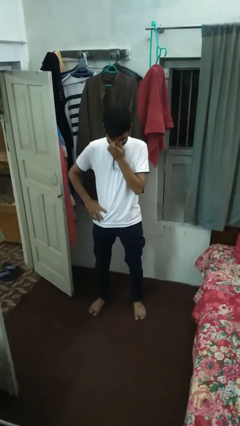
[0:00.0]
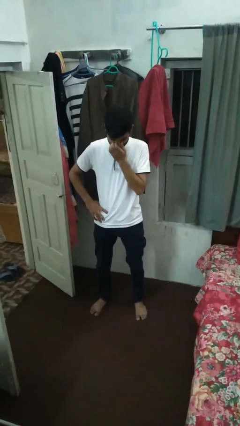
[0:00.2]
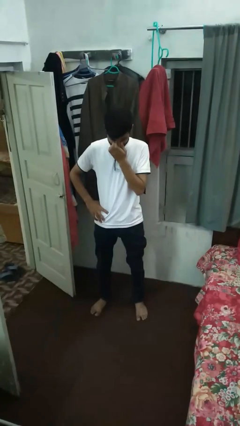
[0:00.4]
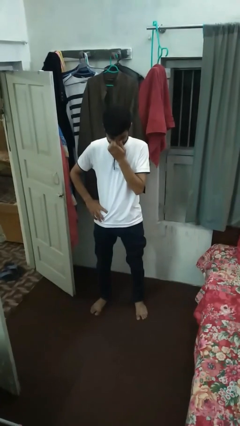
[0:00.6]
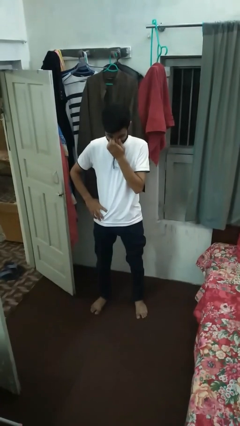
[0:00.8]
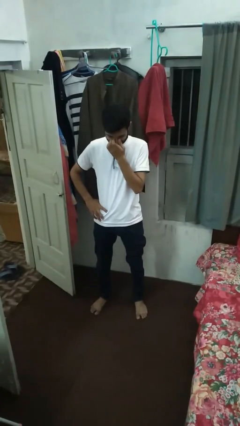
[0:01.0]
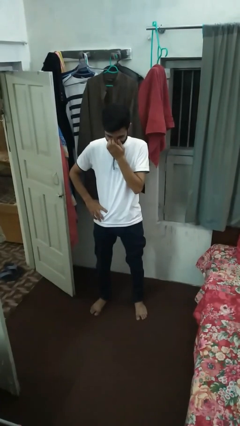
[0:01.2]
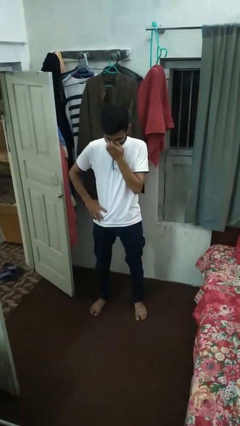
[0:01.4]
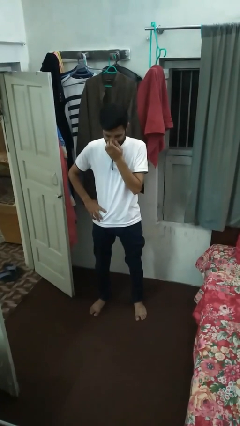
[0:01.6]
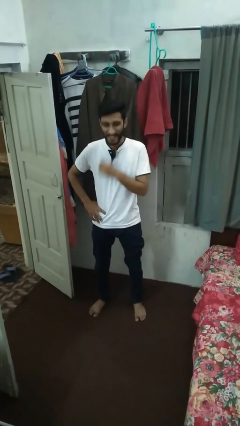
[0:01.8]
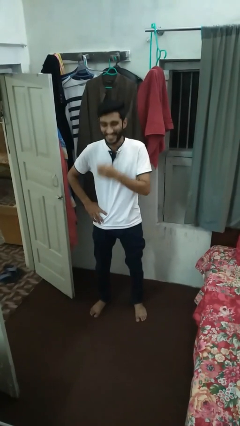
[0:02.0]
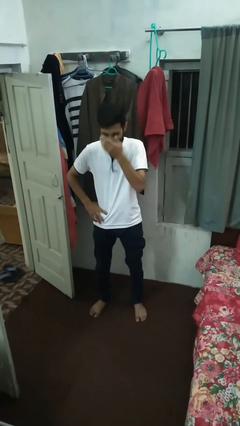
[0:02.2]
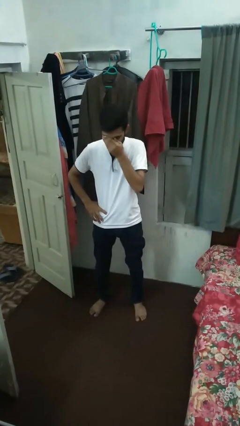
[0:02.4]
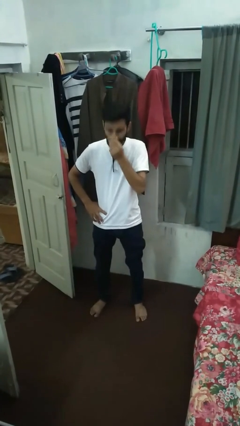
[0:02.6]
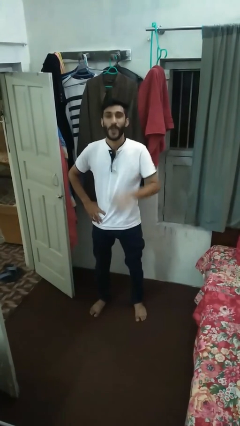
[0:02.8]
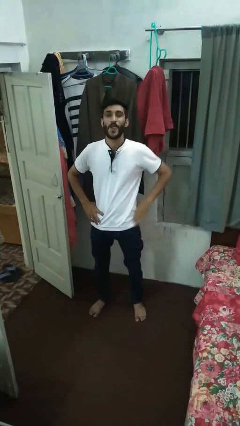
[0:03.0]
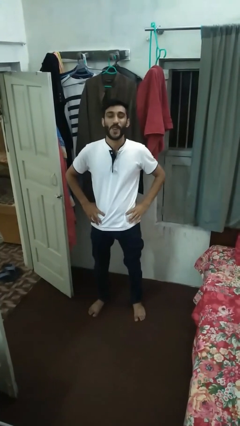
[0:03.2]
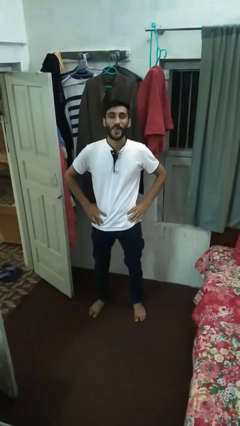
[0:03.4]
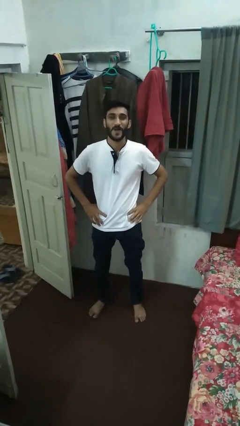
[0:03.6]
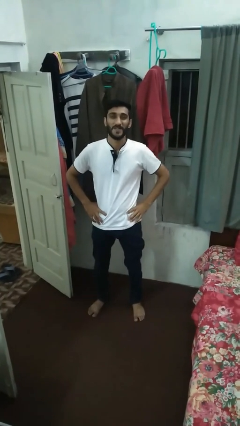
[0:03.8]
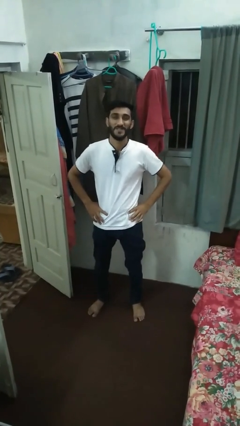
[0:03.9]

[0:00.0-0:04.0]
person sticks out tongue

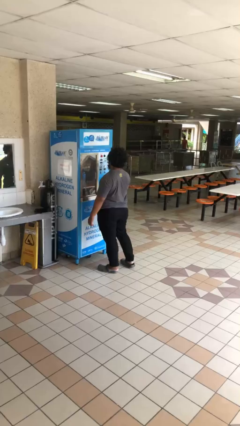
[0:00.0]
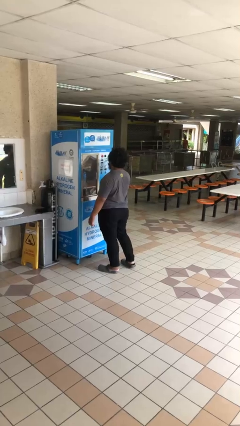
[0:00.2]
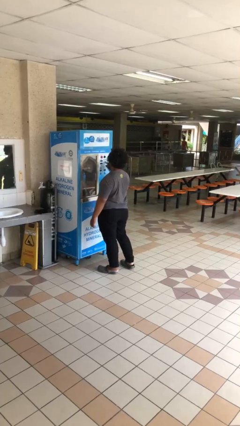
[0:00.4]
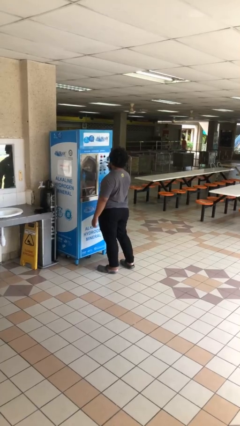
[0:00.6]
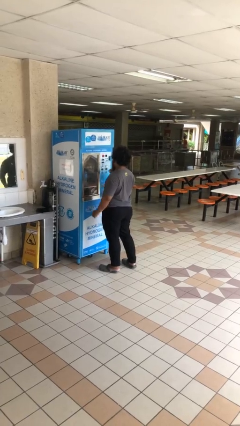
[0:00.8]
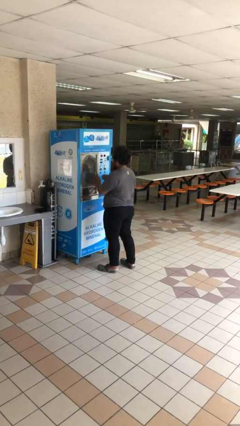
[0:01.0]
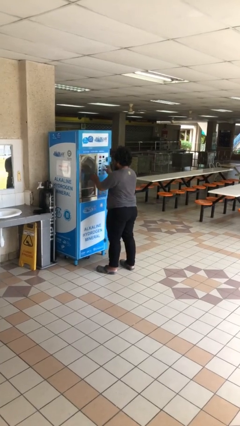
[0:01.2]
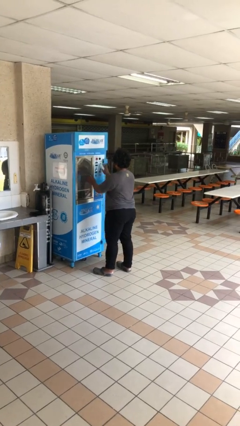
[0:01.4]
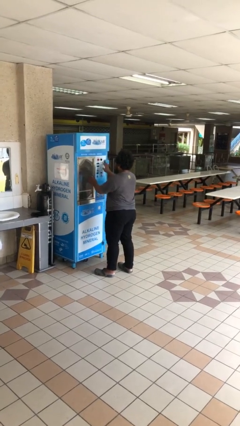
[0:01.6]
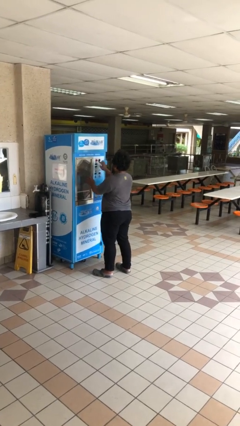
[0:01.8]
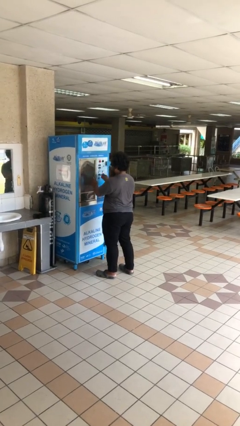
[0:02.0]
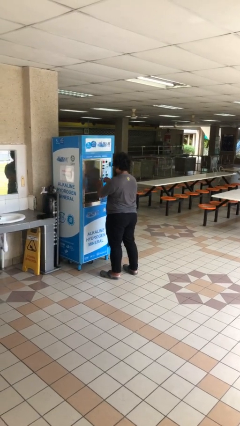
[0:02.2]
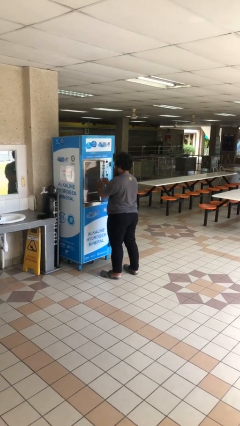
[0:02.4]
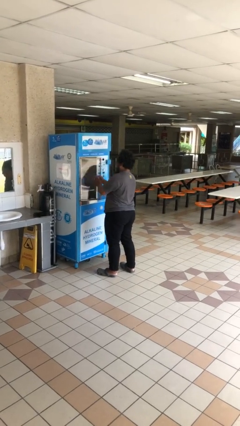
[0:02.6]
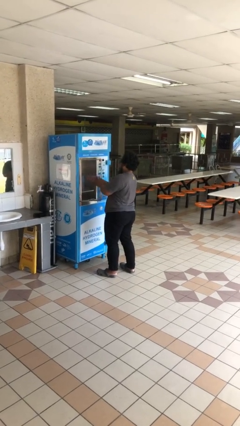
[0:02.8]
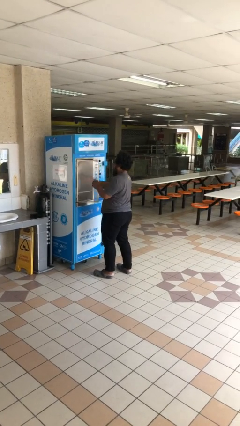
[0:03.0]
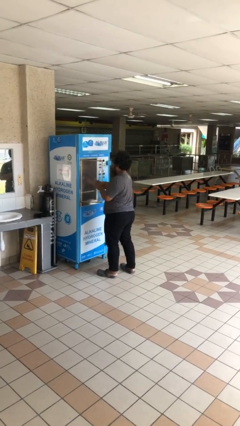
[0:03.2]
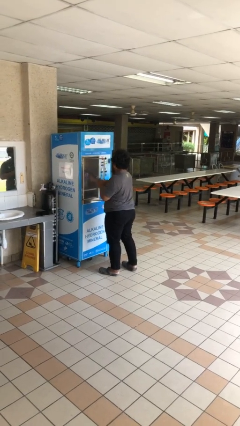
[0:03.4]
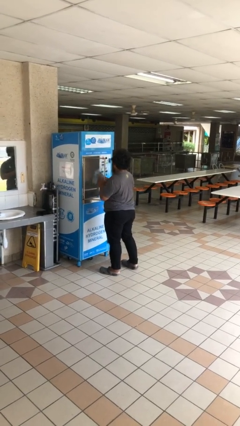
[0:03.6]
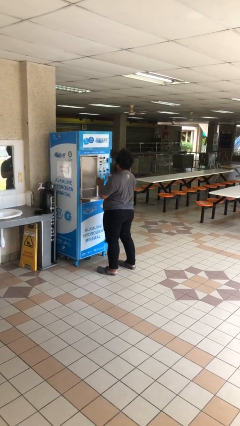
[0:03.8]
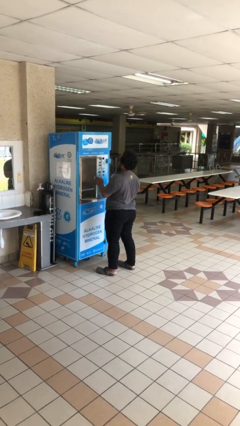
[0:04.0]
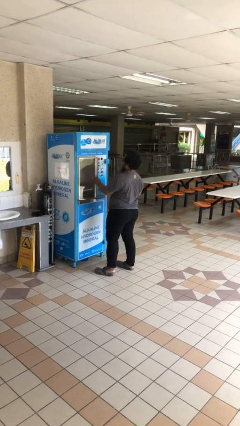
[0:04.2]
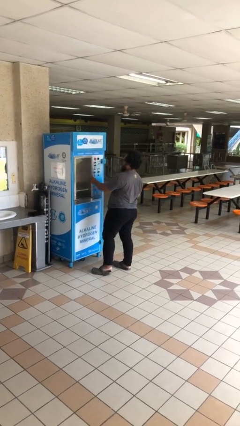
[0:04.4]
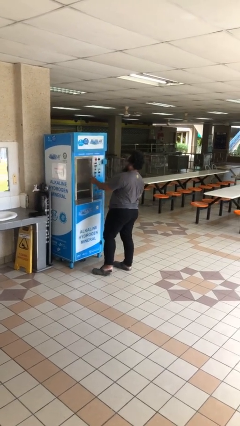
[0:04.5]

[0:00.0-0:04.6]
person purchases from machine

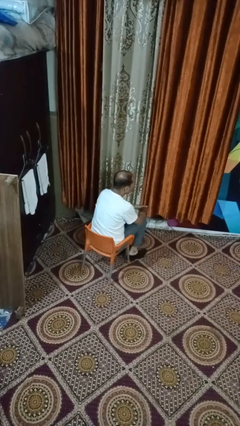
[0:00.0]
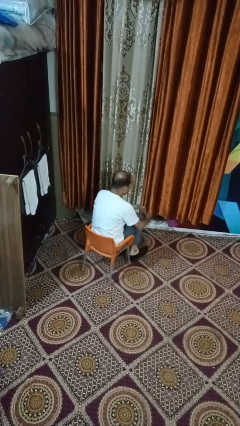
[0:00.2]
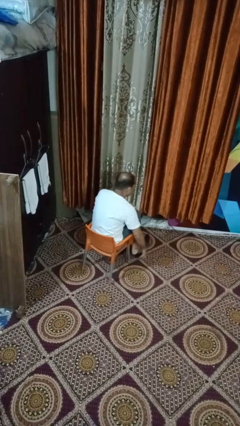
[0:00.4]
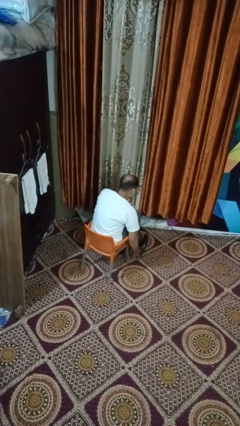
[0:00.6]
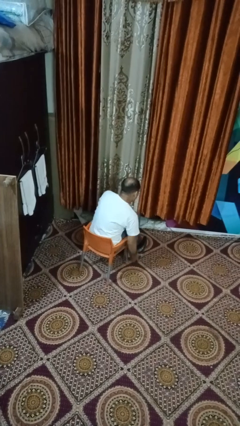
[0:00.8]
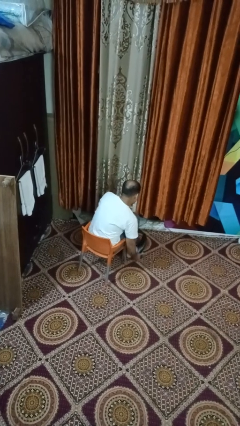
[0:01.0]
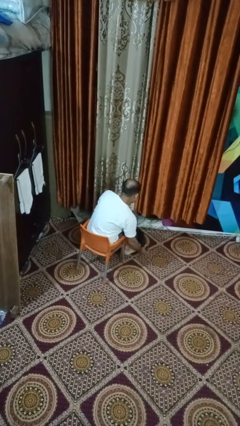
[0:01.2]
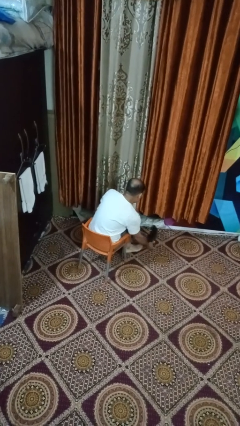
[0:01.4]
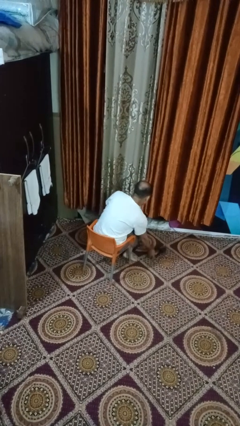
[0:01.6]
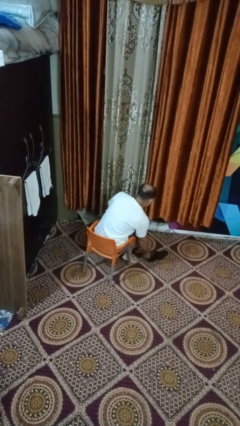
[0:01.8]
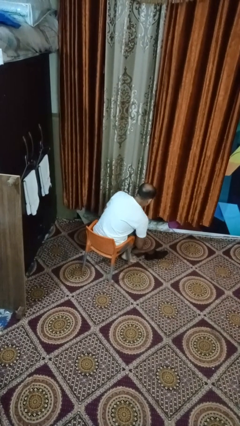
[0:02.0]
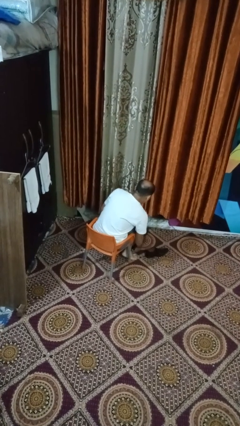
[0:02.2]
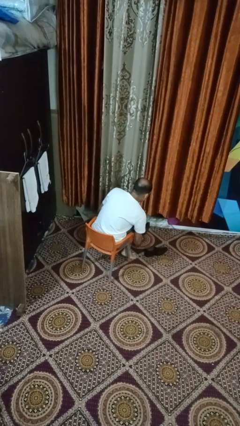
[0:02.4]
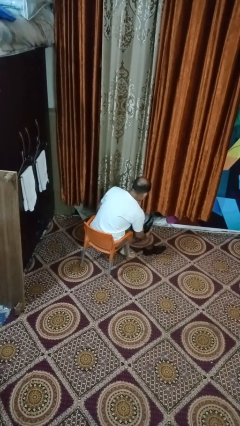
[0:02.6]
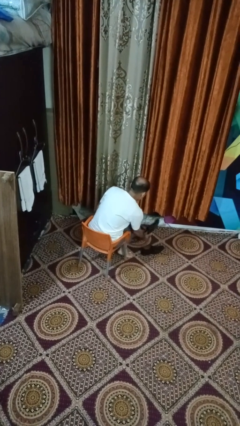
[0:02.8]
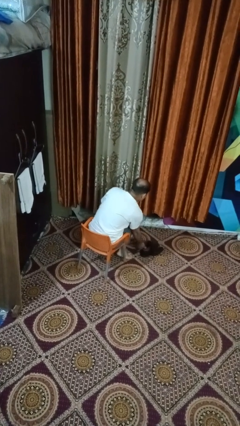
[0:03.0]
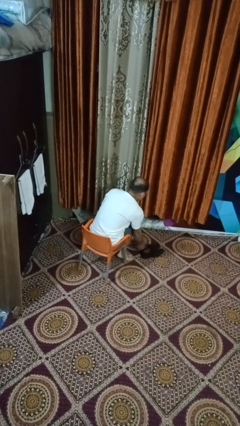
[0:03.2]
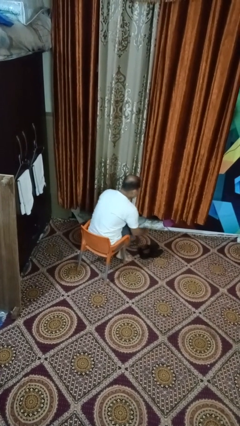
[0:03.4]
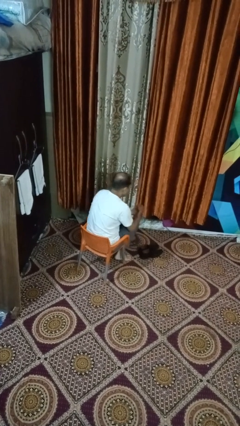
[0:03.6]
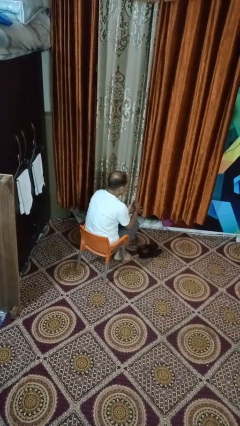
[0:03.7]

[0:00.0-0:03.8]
person takes off shoes

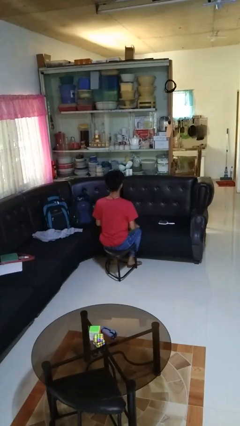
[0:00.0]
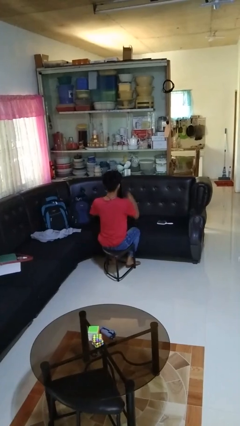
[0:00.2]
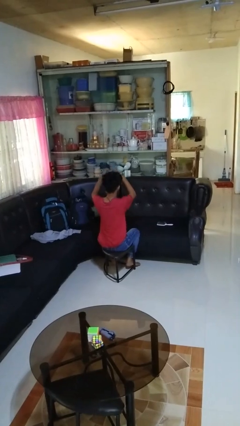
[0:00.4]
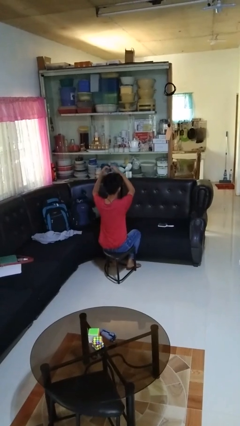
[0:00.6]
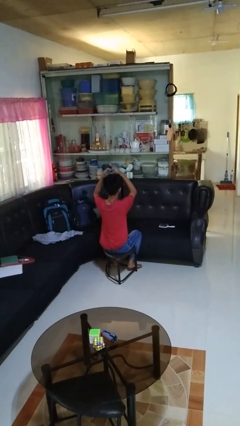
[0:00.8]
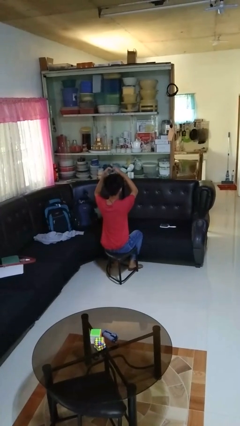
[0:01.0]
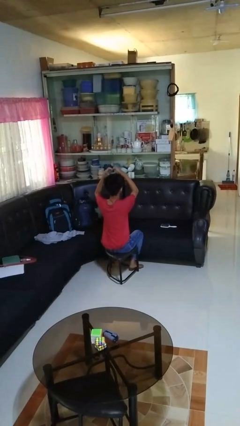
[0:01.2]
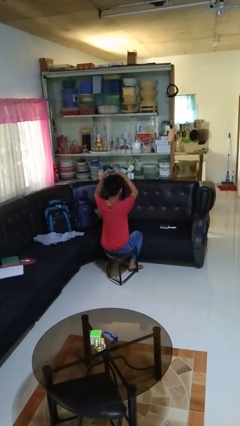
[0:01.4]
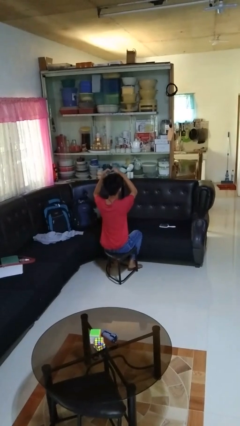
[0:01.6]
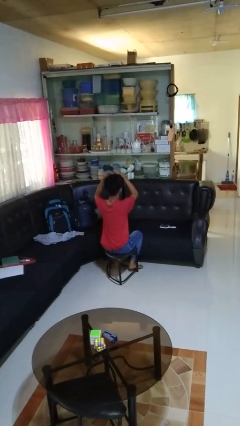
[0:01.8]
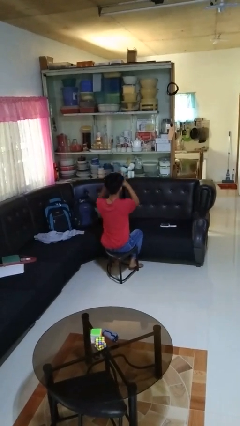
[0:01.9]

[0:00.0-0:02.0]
person gestures heart

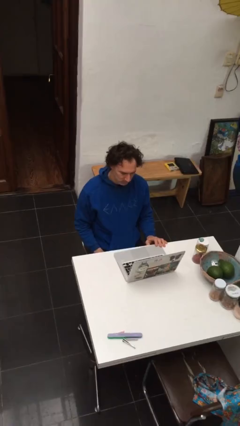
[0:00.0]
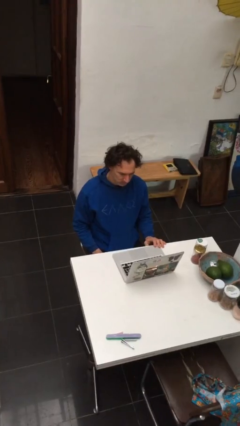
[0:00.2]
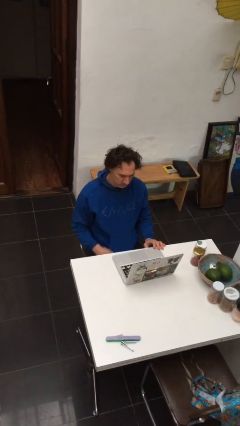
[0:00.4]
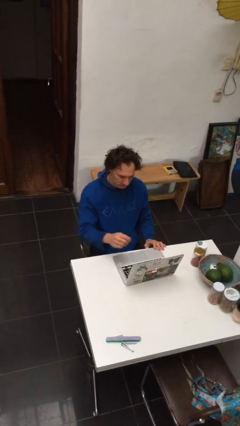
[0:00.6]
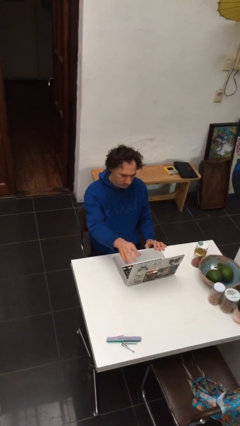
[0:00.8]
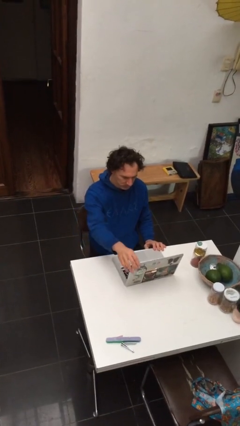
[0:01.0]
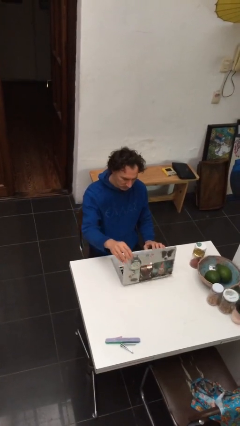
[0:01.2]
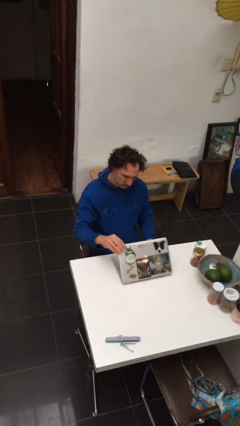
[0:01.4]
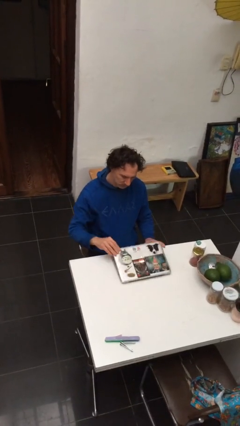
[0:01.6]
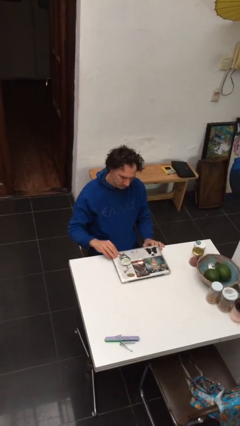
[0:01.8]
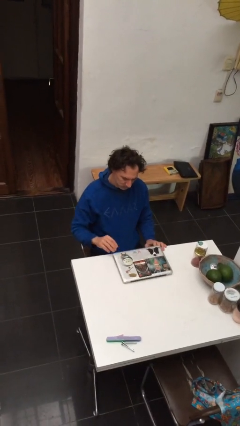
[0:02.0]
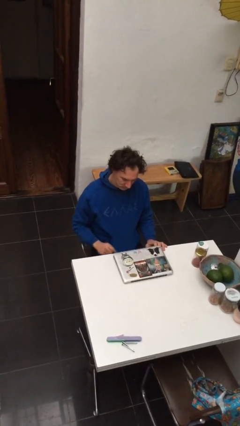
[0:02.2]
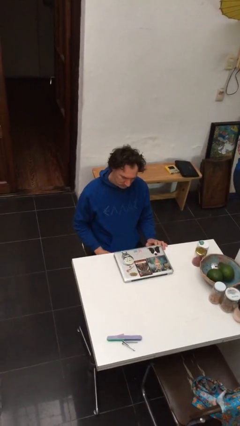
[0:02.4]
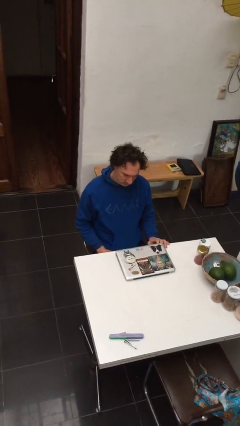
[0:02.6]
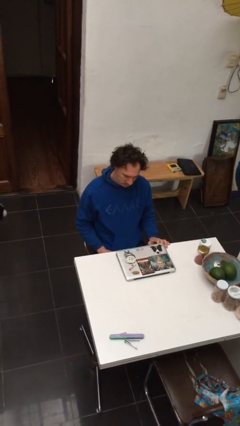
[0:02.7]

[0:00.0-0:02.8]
person closes laptop
